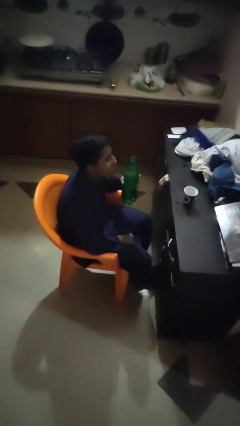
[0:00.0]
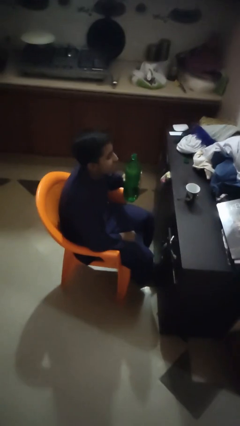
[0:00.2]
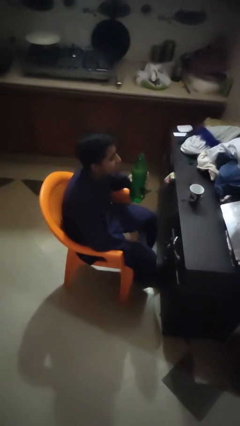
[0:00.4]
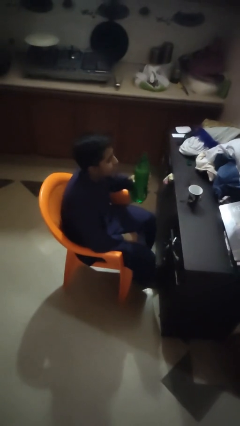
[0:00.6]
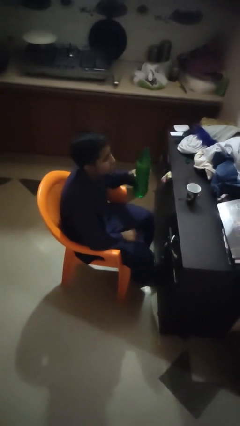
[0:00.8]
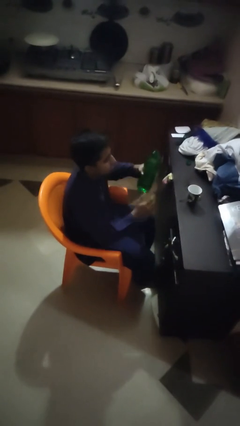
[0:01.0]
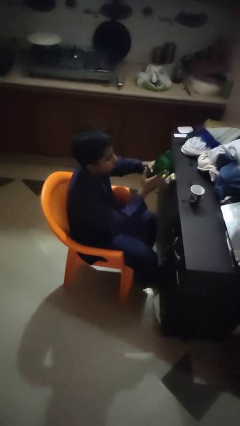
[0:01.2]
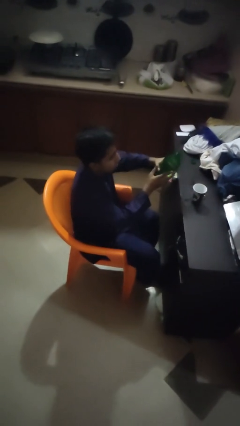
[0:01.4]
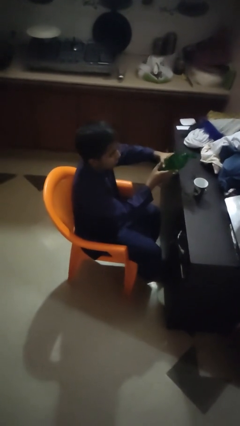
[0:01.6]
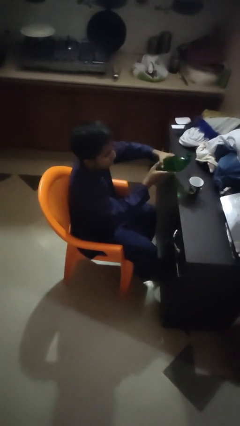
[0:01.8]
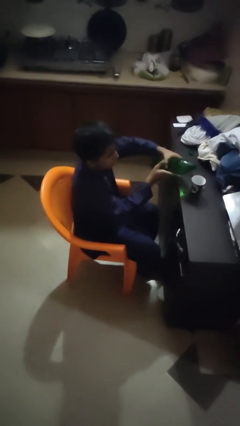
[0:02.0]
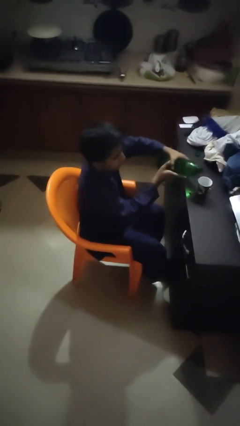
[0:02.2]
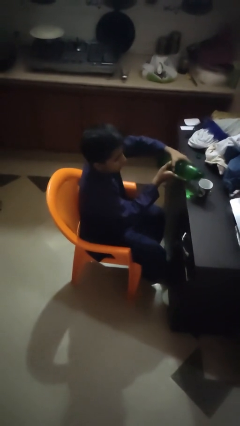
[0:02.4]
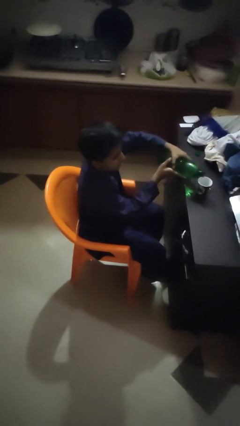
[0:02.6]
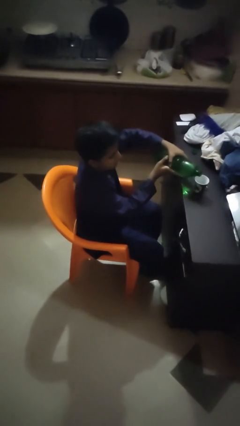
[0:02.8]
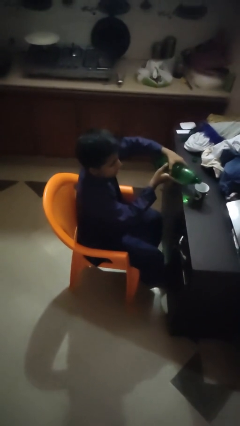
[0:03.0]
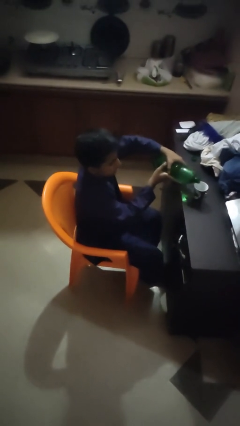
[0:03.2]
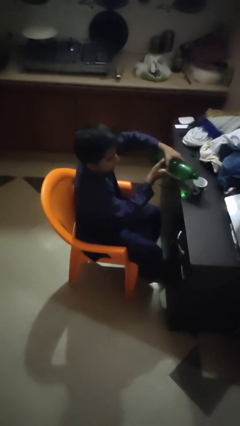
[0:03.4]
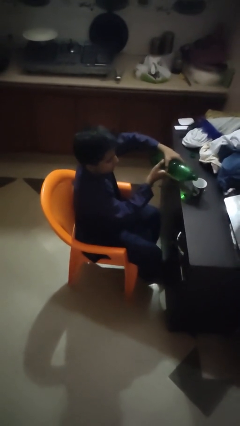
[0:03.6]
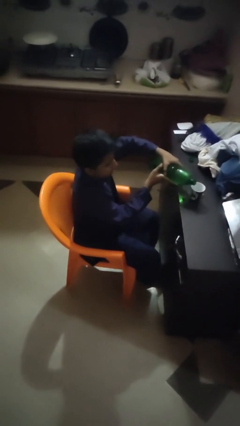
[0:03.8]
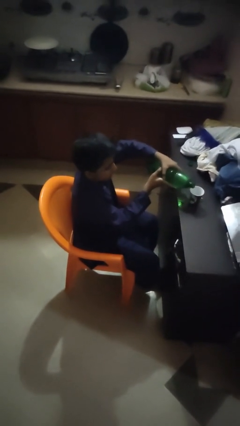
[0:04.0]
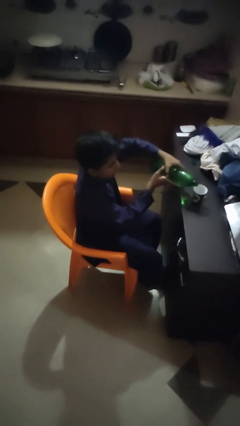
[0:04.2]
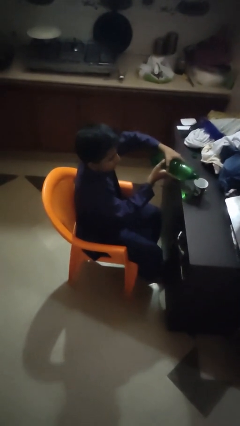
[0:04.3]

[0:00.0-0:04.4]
person pours liquid into cup

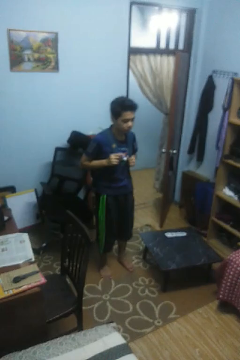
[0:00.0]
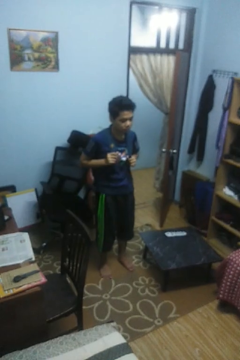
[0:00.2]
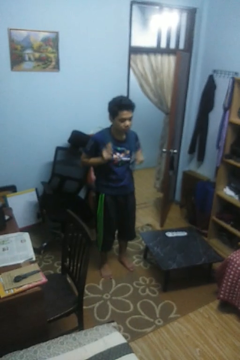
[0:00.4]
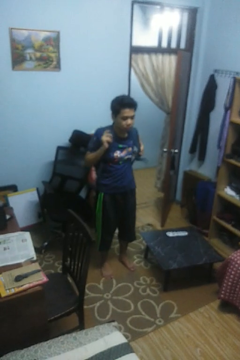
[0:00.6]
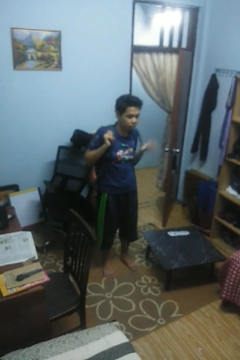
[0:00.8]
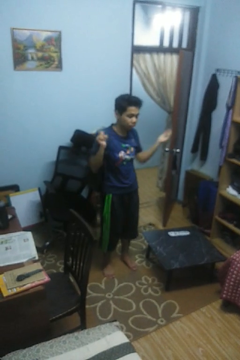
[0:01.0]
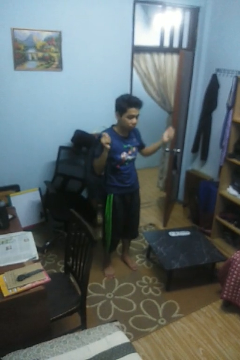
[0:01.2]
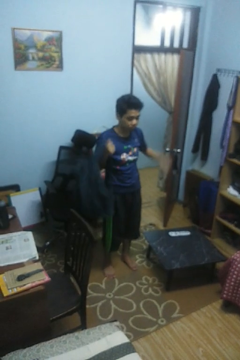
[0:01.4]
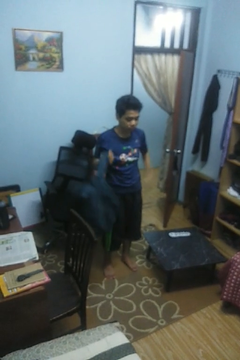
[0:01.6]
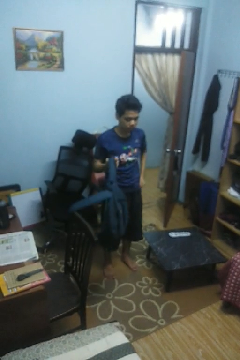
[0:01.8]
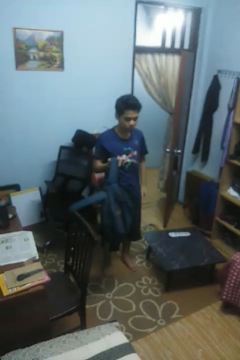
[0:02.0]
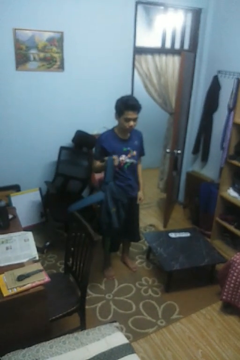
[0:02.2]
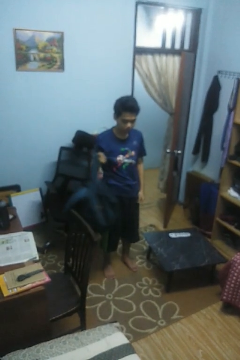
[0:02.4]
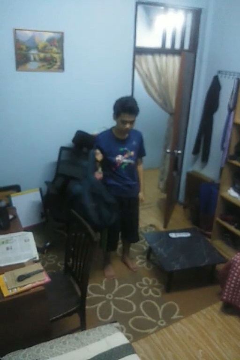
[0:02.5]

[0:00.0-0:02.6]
person takes off backpack

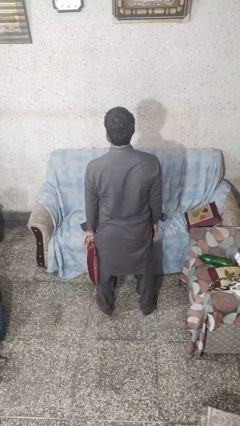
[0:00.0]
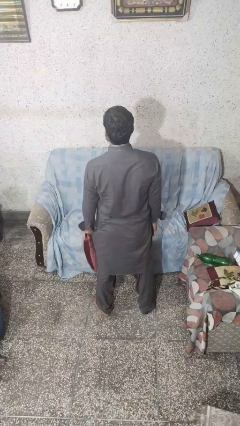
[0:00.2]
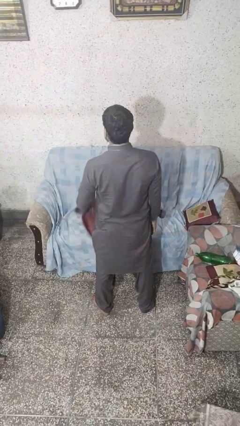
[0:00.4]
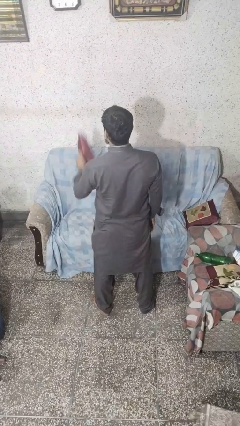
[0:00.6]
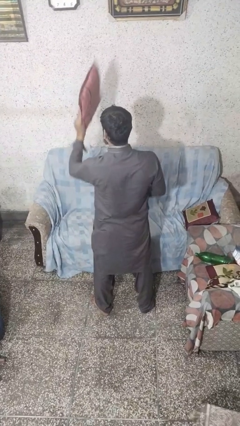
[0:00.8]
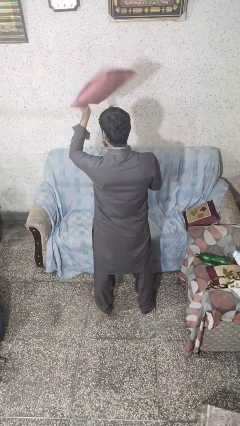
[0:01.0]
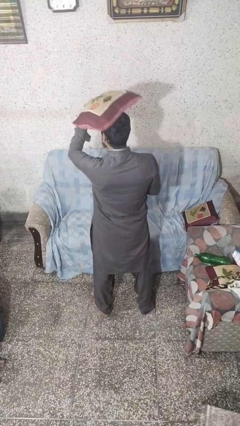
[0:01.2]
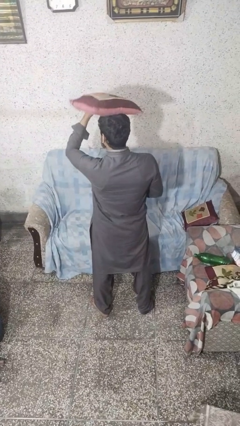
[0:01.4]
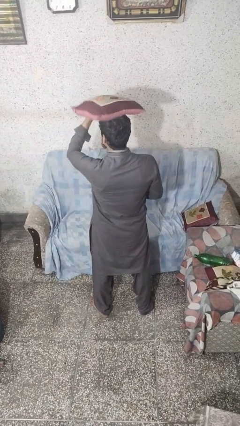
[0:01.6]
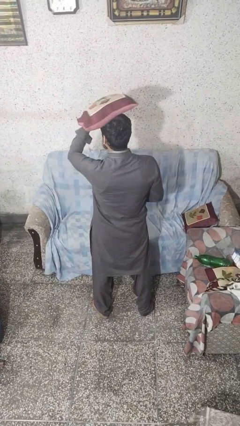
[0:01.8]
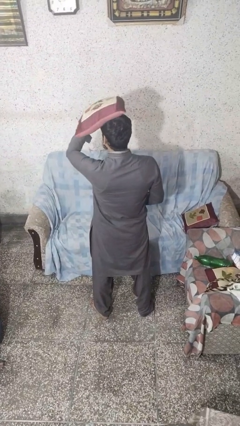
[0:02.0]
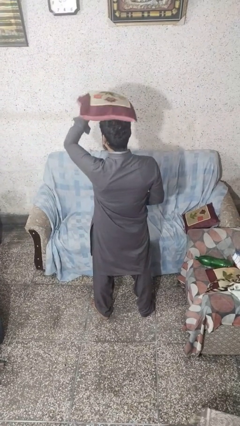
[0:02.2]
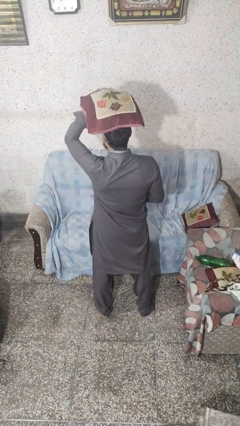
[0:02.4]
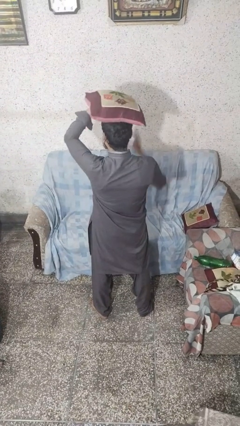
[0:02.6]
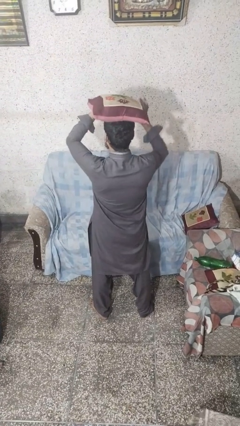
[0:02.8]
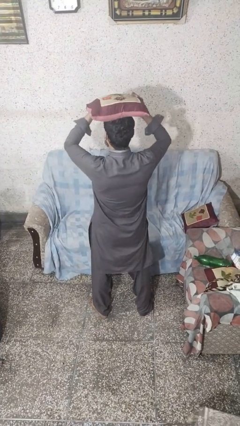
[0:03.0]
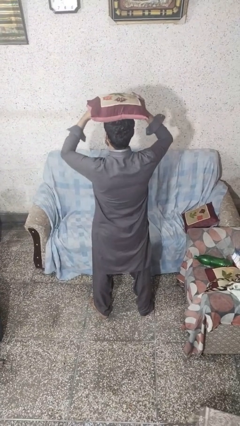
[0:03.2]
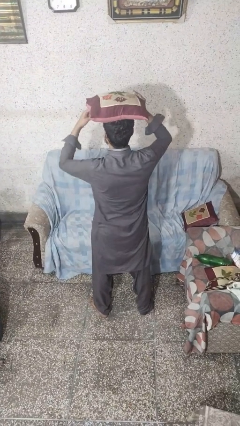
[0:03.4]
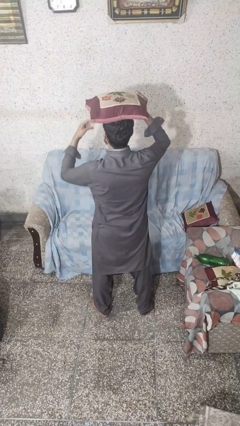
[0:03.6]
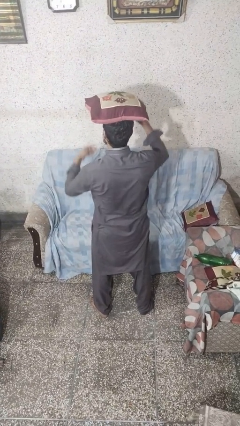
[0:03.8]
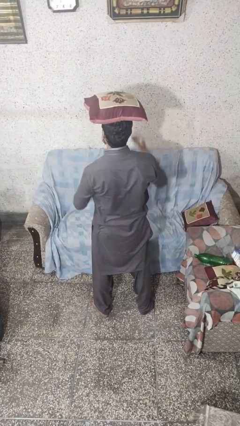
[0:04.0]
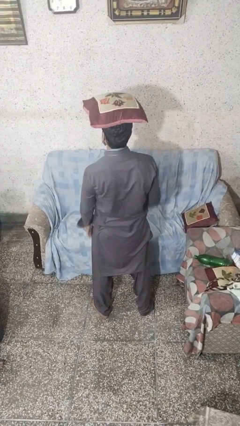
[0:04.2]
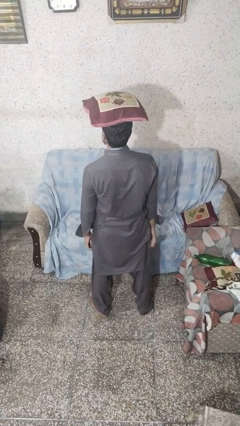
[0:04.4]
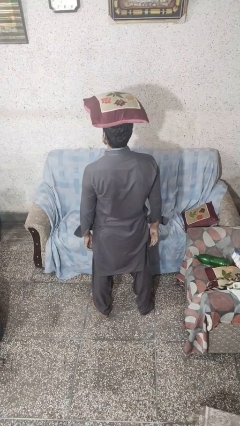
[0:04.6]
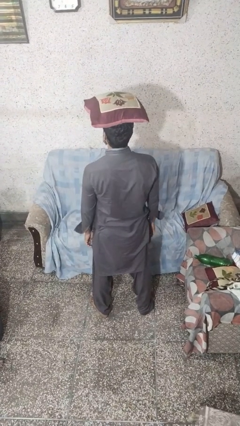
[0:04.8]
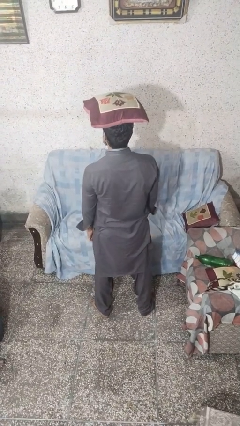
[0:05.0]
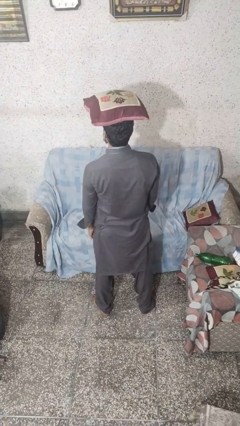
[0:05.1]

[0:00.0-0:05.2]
person holds object above head

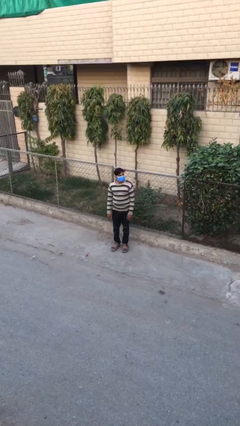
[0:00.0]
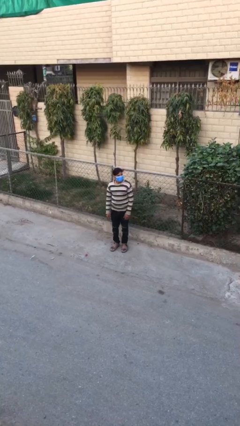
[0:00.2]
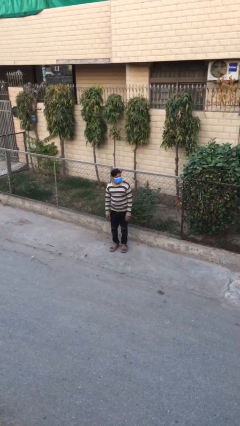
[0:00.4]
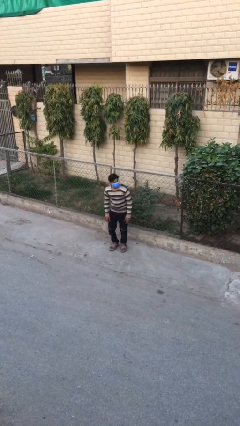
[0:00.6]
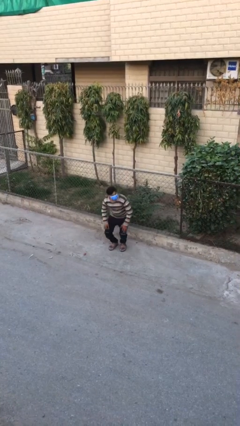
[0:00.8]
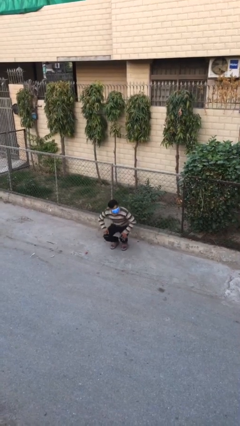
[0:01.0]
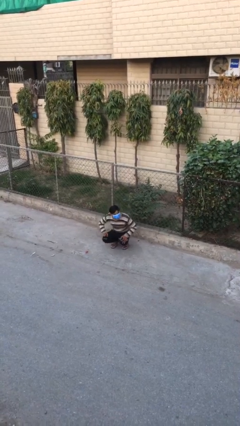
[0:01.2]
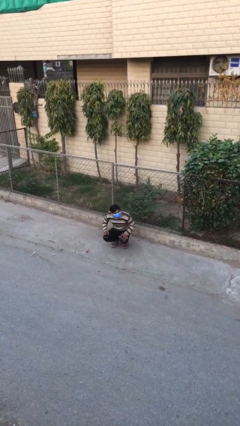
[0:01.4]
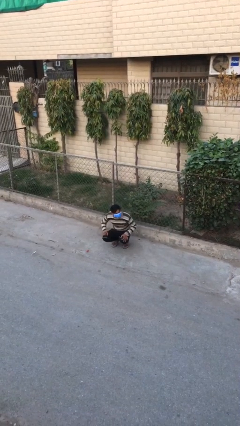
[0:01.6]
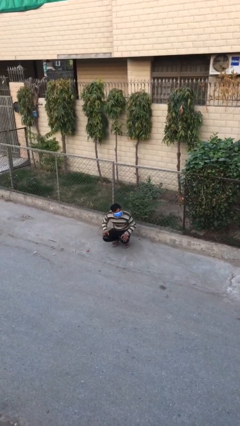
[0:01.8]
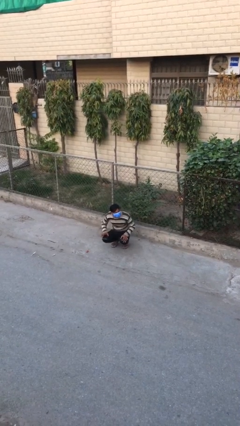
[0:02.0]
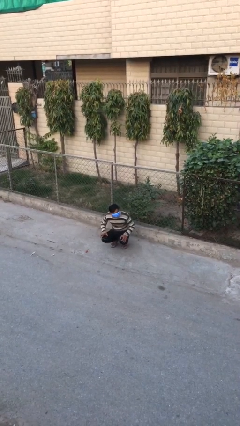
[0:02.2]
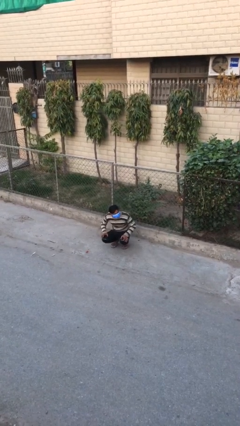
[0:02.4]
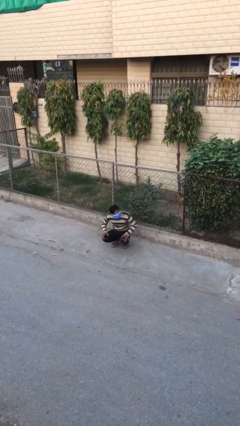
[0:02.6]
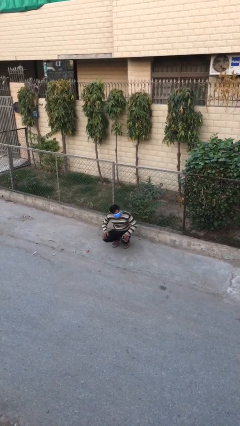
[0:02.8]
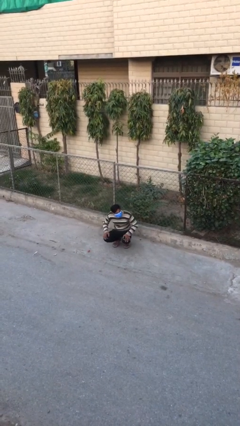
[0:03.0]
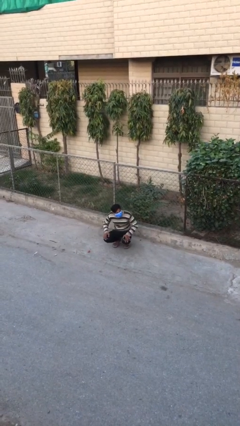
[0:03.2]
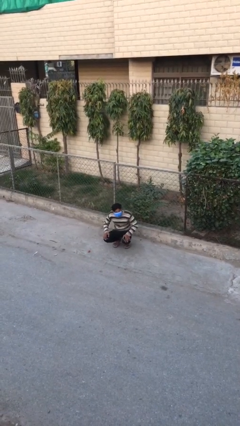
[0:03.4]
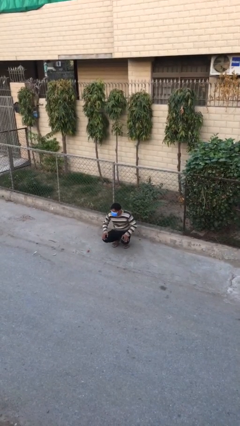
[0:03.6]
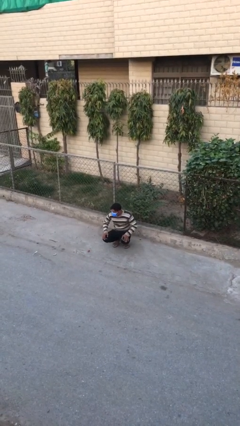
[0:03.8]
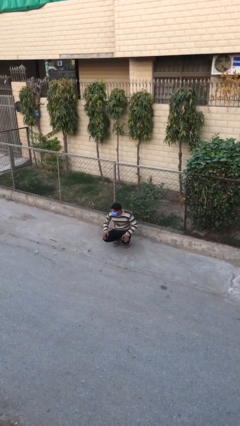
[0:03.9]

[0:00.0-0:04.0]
person sits down

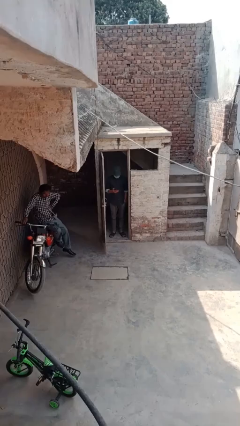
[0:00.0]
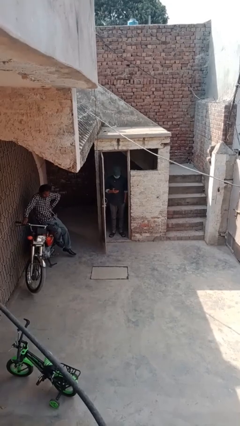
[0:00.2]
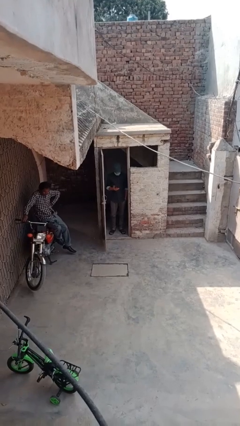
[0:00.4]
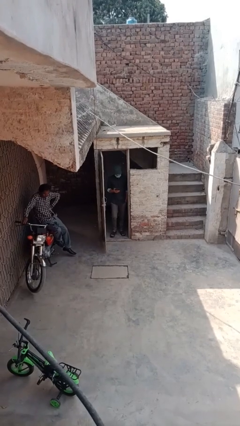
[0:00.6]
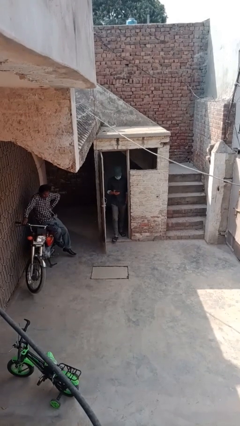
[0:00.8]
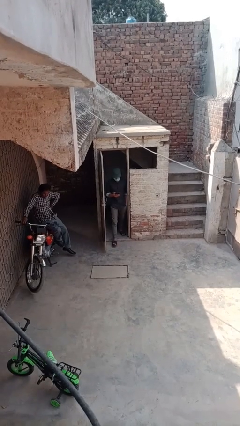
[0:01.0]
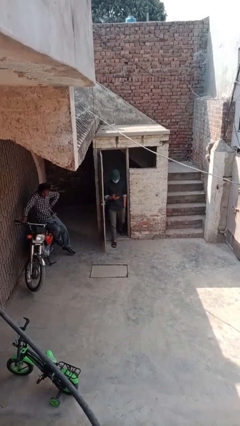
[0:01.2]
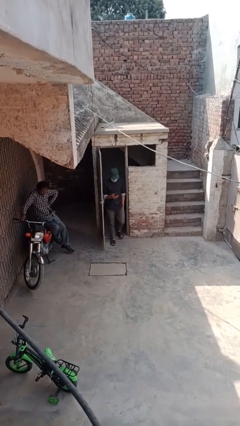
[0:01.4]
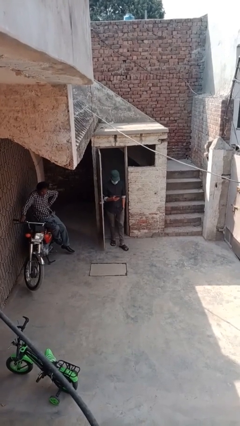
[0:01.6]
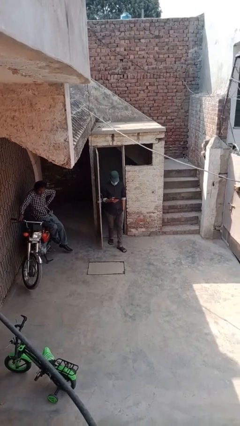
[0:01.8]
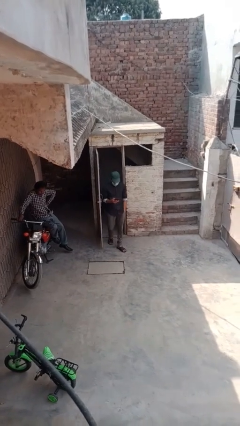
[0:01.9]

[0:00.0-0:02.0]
person enters scene through structure
